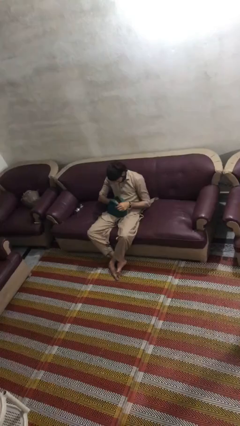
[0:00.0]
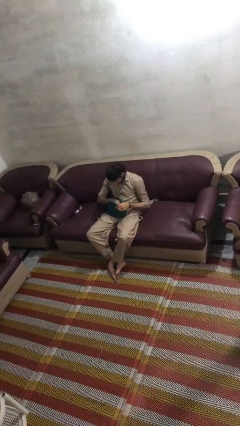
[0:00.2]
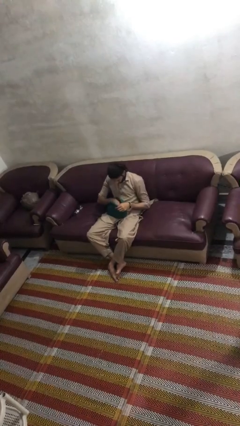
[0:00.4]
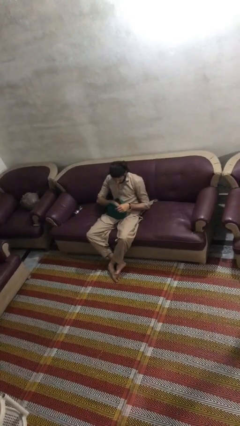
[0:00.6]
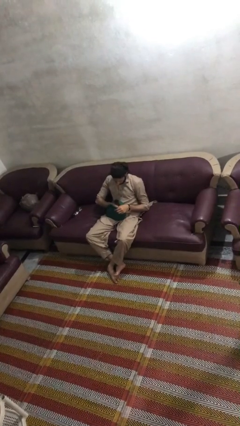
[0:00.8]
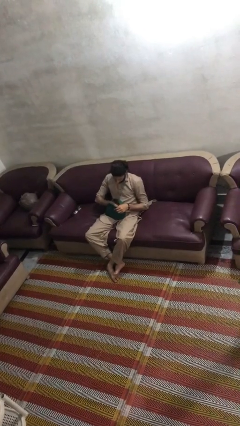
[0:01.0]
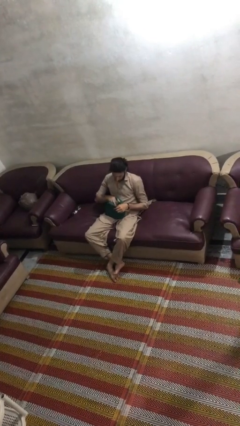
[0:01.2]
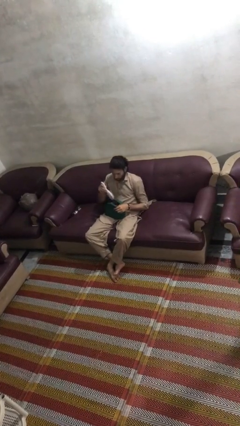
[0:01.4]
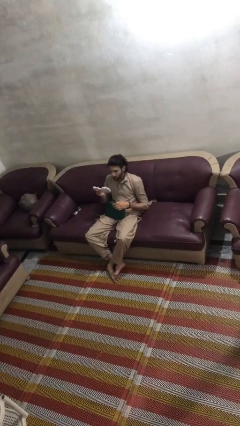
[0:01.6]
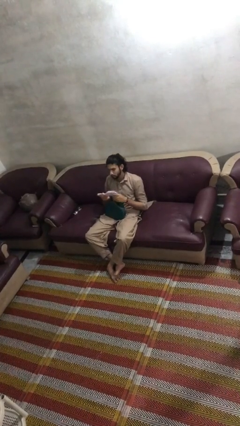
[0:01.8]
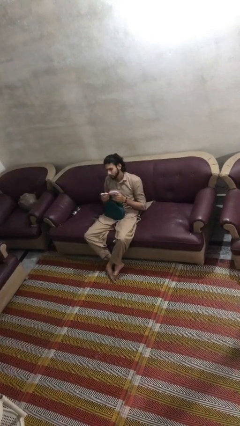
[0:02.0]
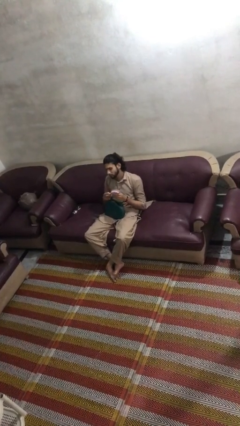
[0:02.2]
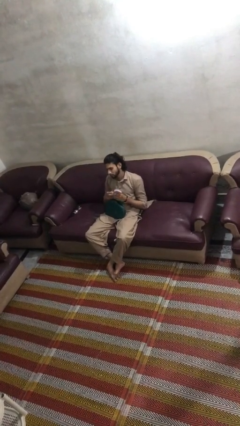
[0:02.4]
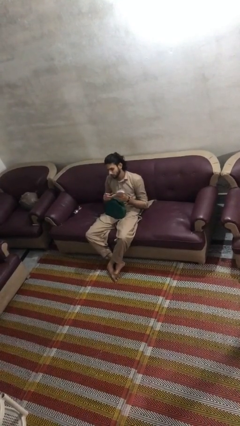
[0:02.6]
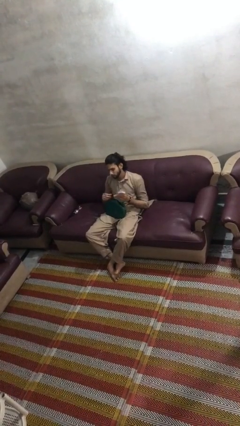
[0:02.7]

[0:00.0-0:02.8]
person takes object from purse

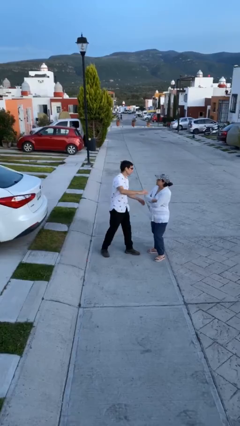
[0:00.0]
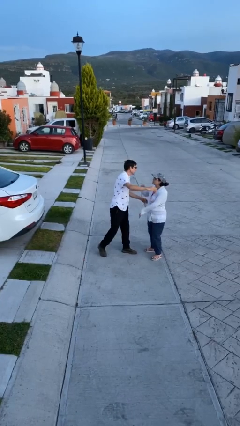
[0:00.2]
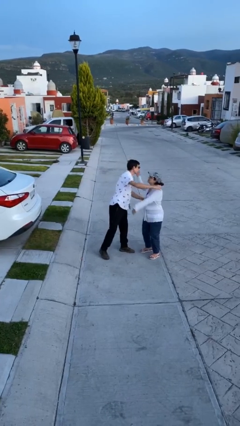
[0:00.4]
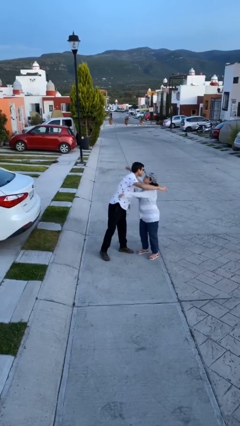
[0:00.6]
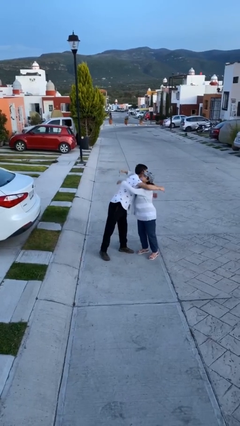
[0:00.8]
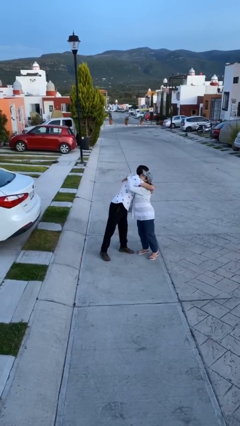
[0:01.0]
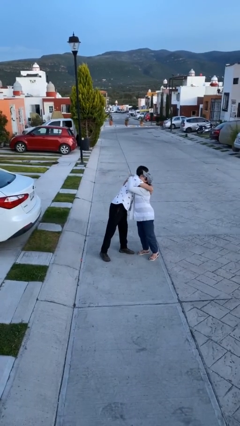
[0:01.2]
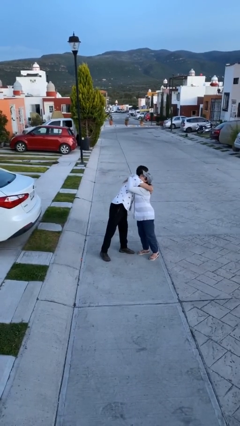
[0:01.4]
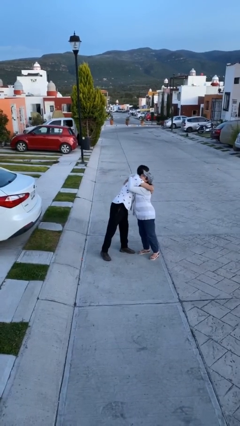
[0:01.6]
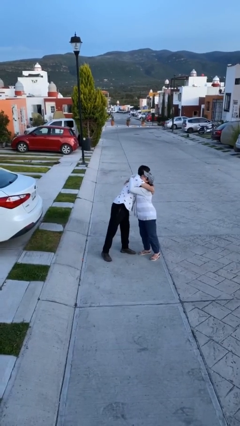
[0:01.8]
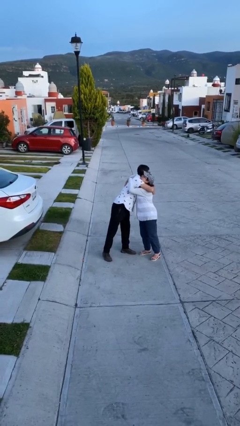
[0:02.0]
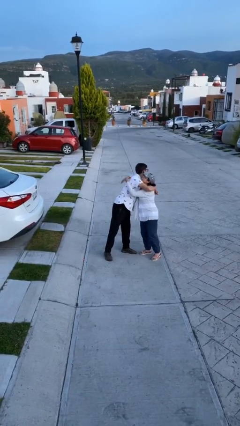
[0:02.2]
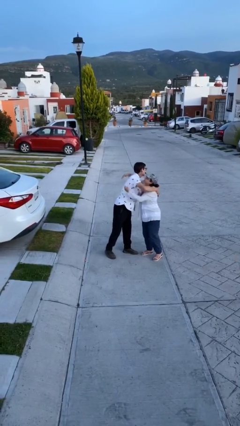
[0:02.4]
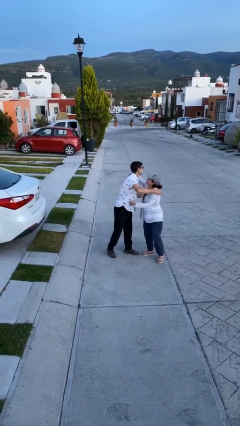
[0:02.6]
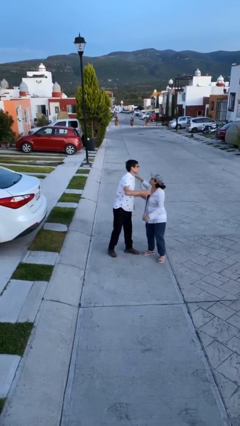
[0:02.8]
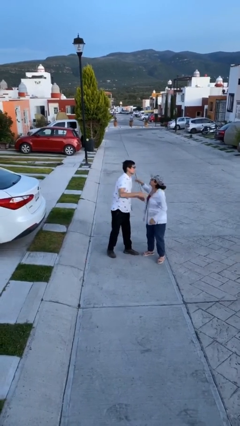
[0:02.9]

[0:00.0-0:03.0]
person embraces person

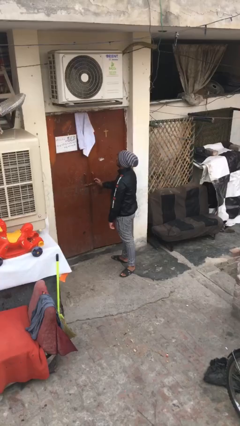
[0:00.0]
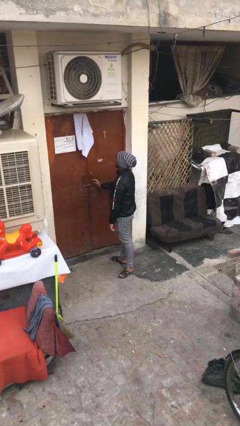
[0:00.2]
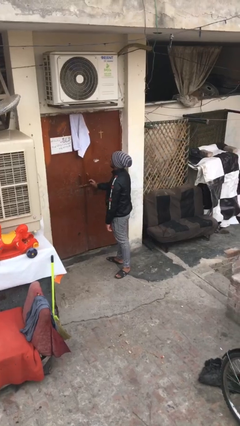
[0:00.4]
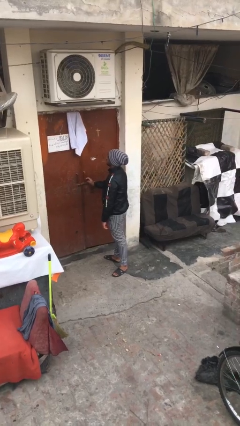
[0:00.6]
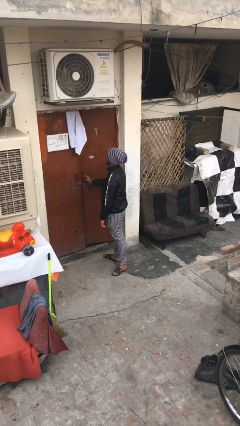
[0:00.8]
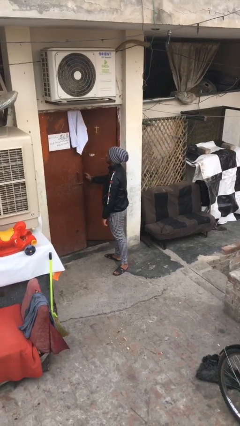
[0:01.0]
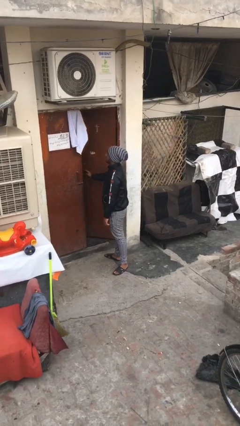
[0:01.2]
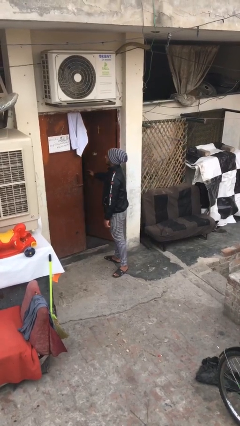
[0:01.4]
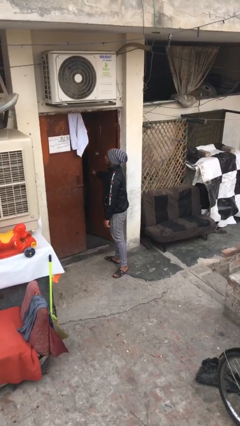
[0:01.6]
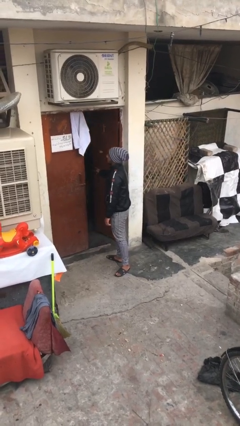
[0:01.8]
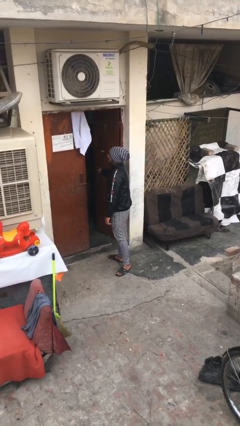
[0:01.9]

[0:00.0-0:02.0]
person opens facility door

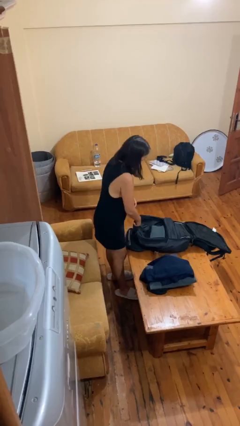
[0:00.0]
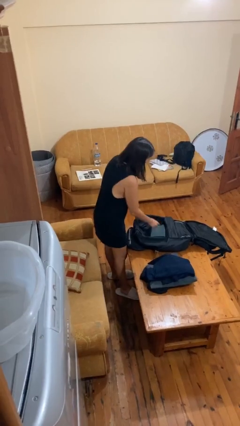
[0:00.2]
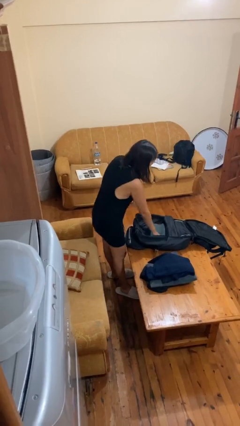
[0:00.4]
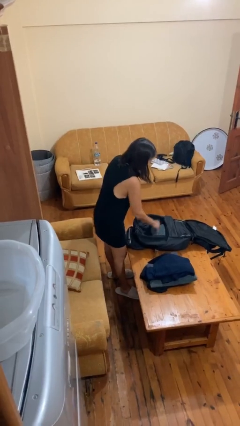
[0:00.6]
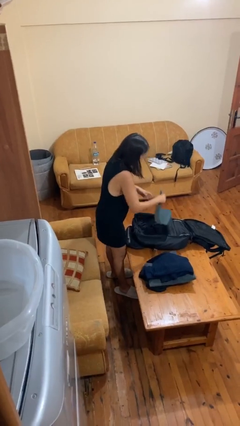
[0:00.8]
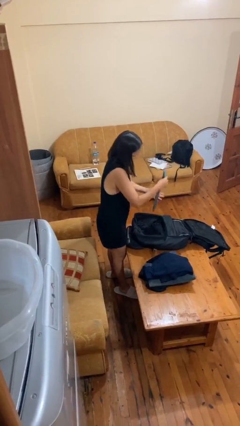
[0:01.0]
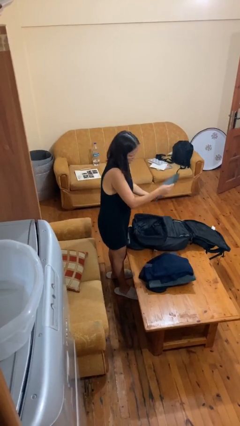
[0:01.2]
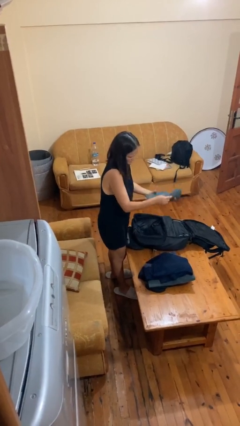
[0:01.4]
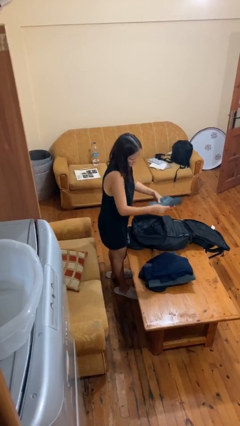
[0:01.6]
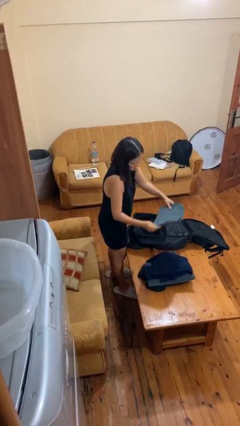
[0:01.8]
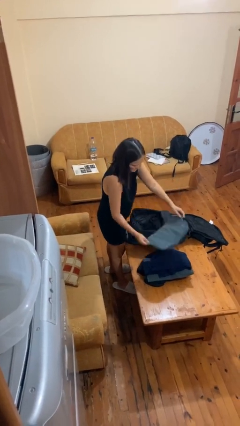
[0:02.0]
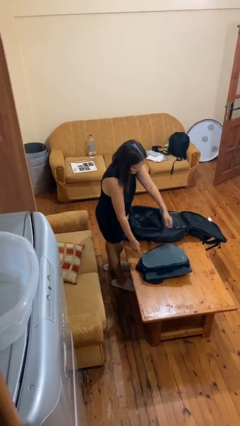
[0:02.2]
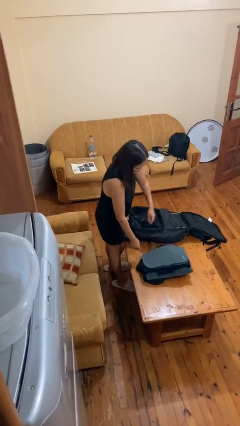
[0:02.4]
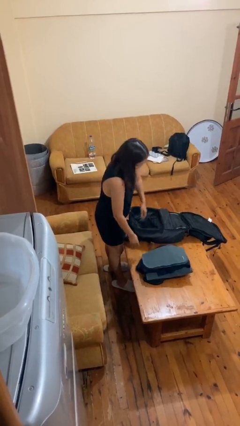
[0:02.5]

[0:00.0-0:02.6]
person unloads clothes from suitcase

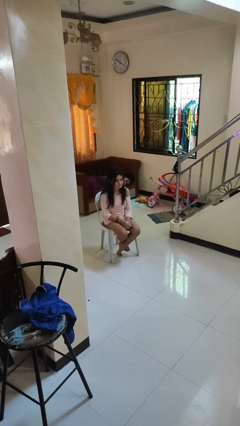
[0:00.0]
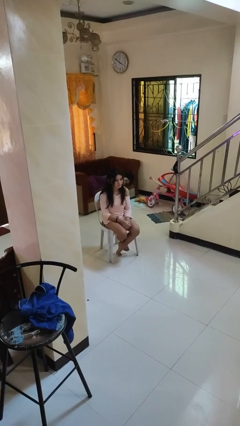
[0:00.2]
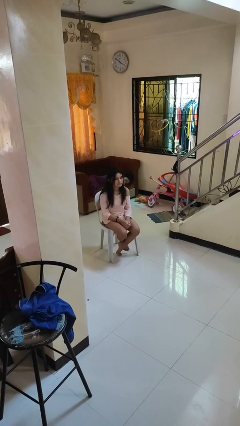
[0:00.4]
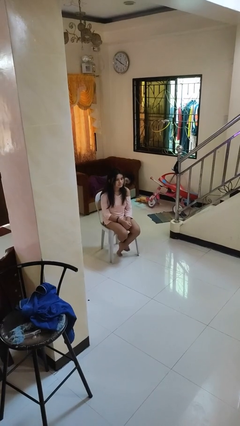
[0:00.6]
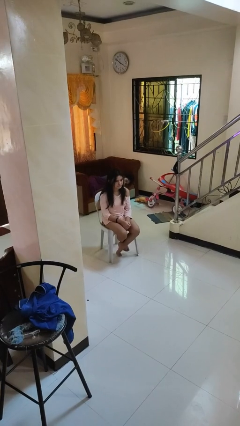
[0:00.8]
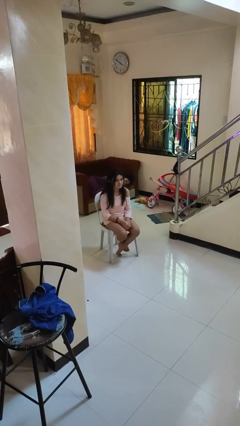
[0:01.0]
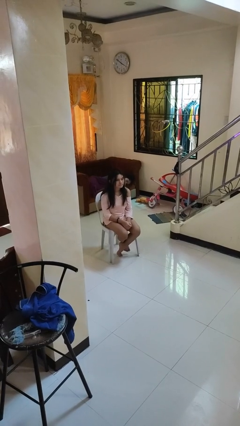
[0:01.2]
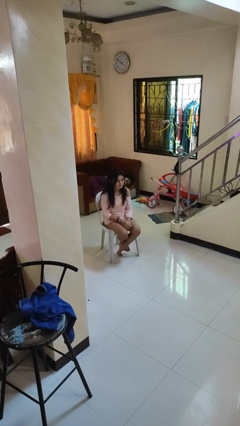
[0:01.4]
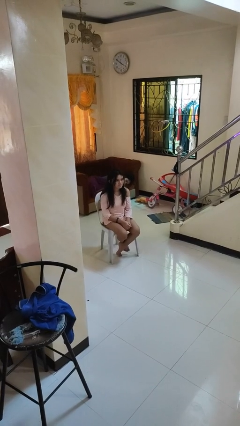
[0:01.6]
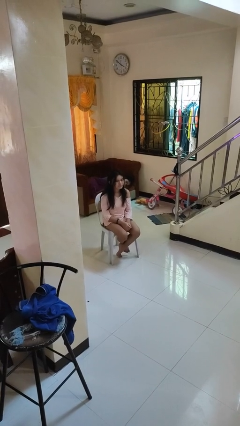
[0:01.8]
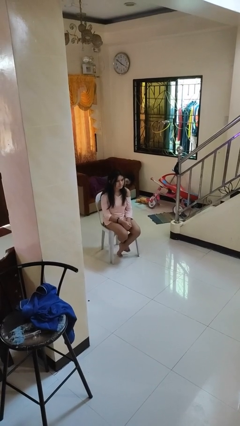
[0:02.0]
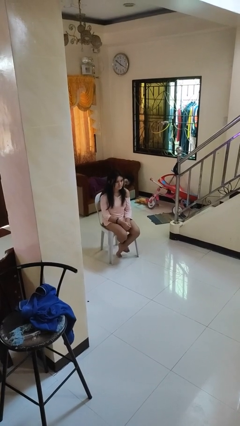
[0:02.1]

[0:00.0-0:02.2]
person nods head

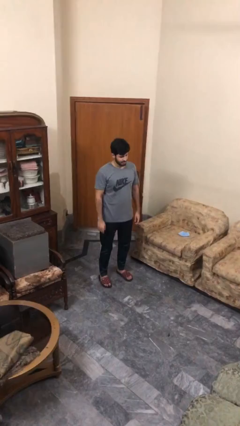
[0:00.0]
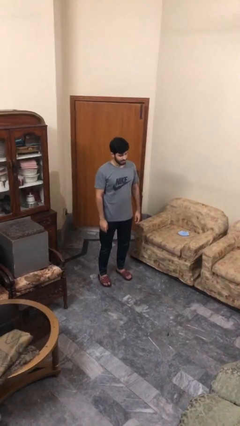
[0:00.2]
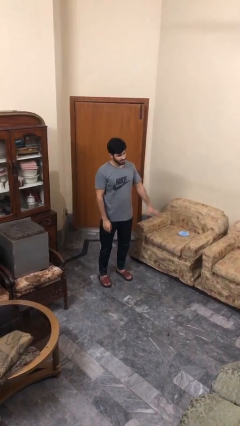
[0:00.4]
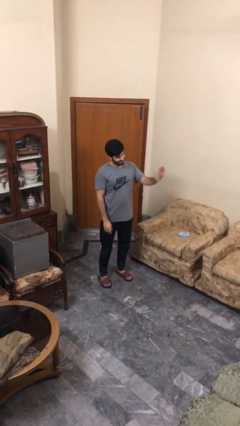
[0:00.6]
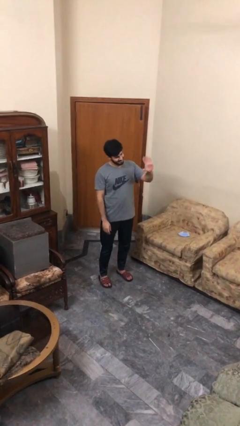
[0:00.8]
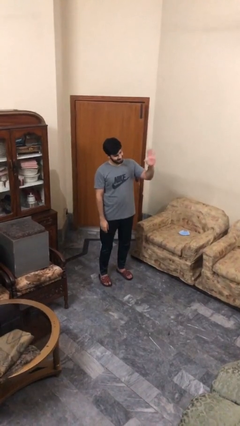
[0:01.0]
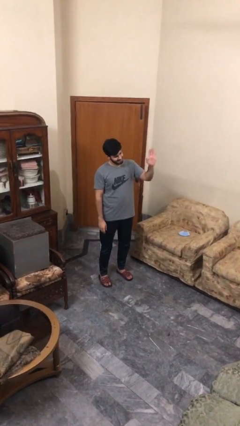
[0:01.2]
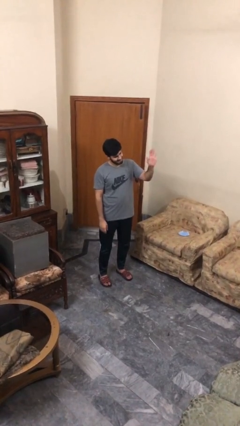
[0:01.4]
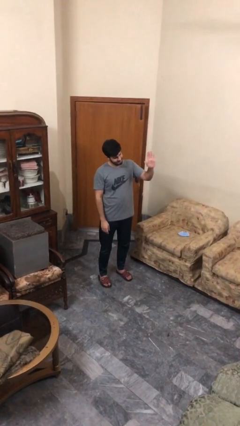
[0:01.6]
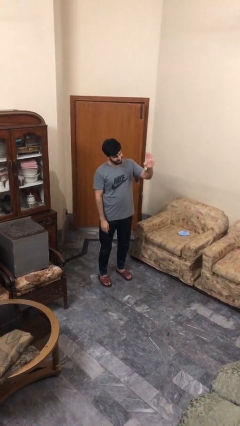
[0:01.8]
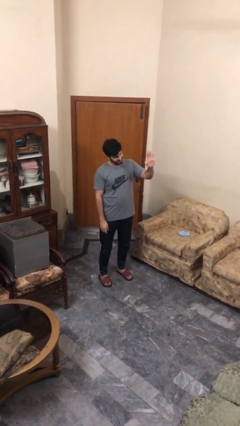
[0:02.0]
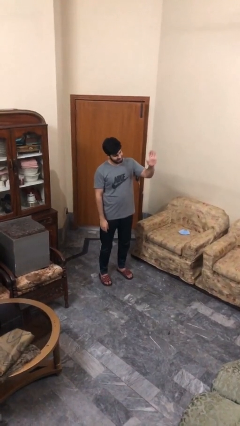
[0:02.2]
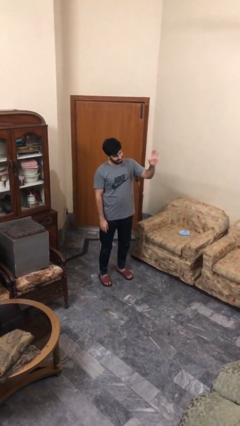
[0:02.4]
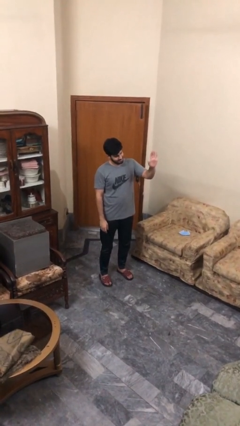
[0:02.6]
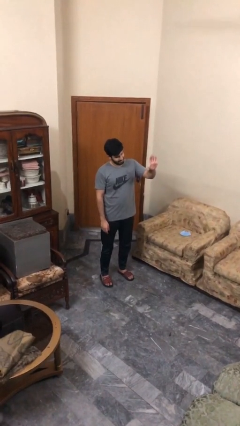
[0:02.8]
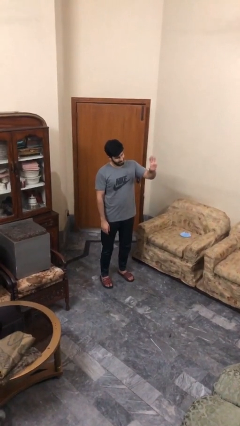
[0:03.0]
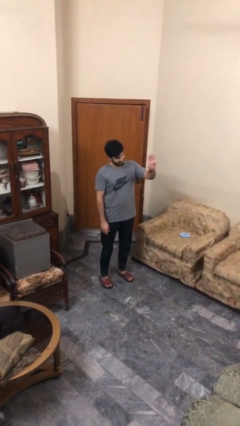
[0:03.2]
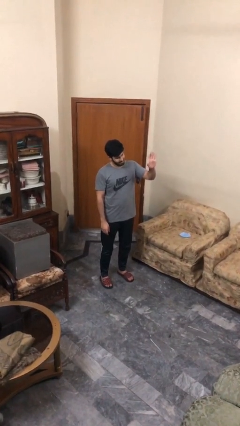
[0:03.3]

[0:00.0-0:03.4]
person waves at person

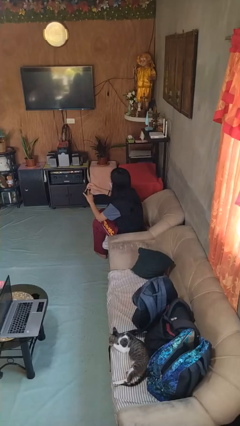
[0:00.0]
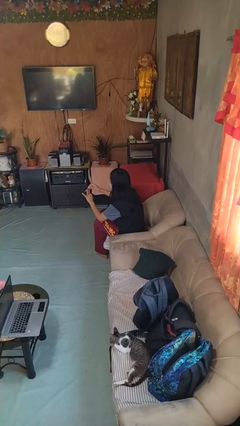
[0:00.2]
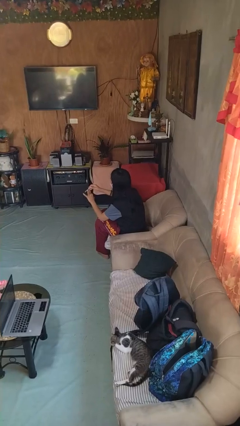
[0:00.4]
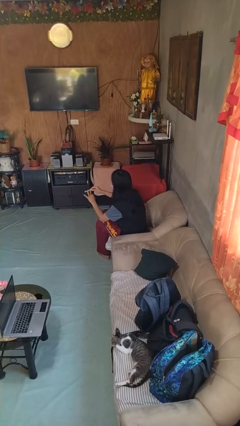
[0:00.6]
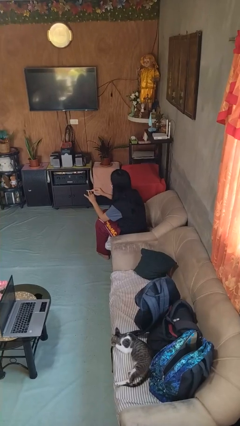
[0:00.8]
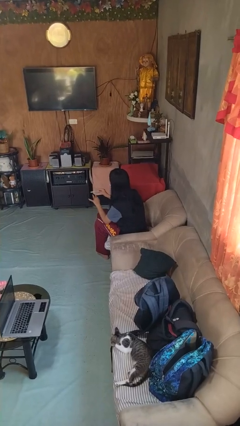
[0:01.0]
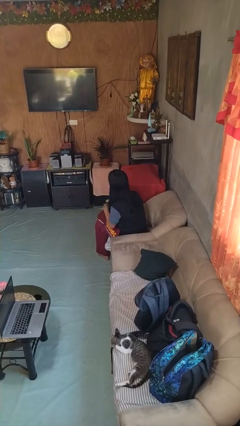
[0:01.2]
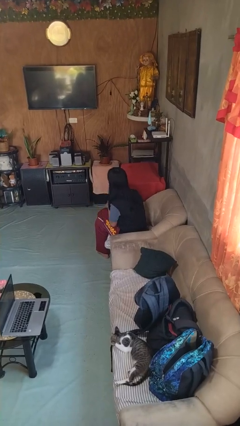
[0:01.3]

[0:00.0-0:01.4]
person files fingernails
